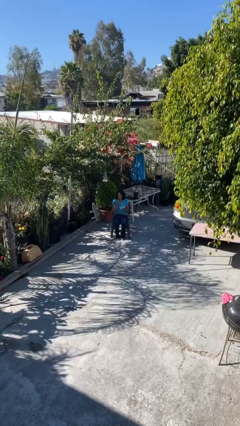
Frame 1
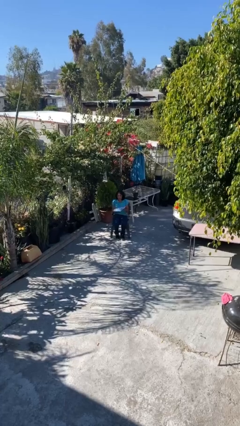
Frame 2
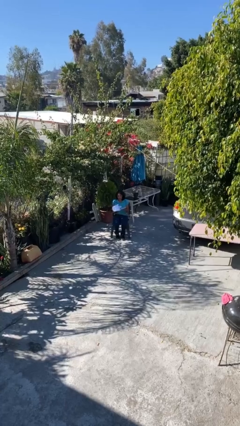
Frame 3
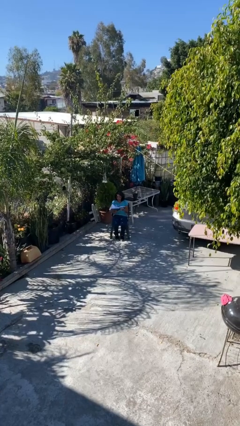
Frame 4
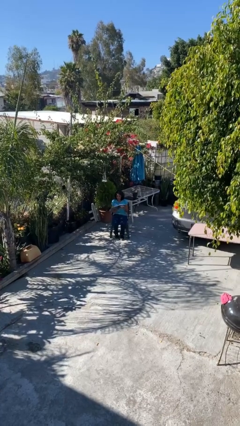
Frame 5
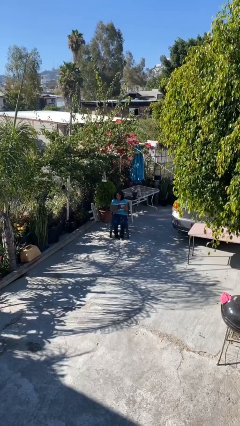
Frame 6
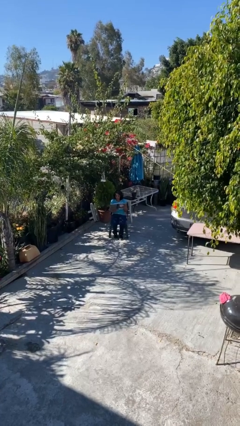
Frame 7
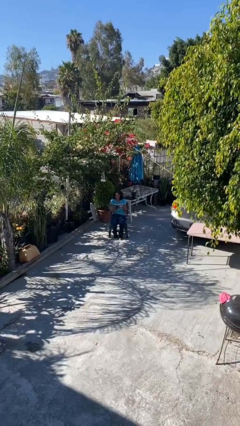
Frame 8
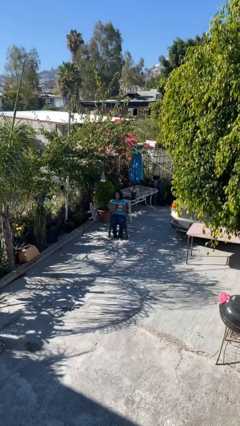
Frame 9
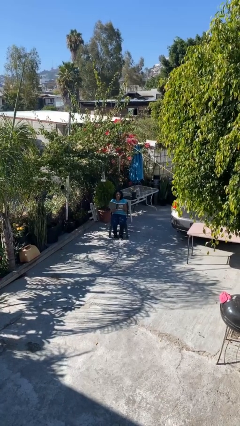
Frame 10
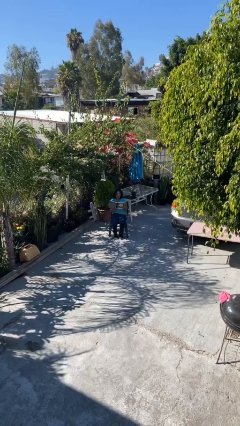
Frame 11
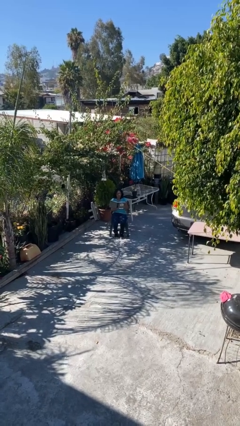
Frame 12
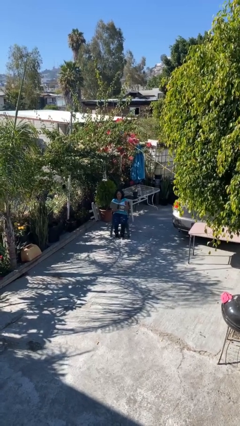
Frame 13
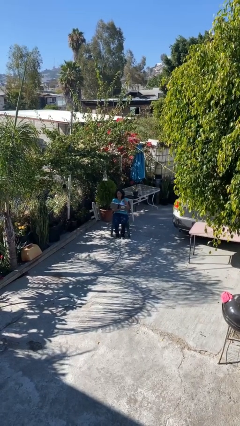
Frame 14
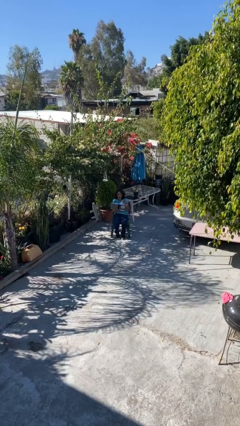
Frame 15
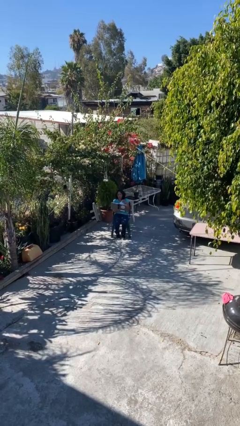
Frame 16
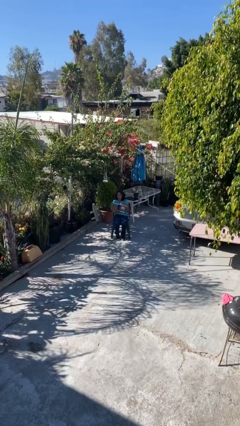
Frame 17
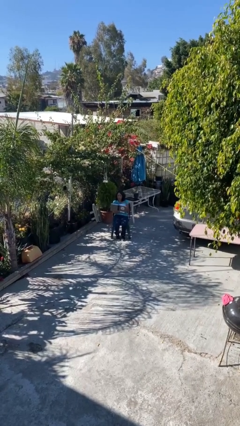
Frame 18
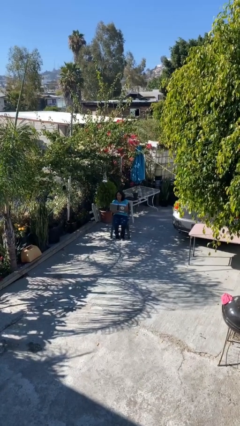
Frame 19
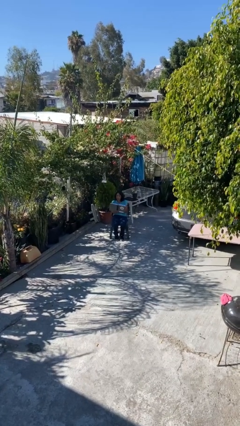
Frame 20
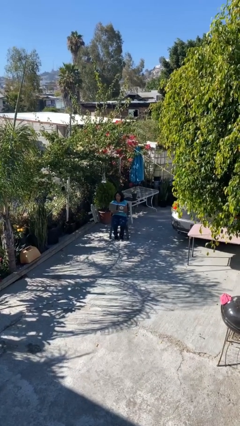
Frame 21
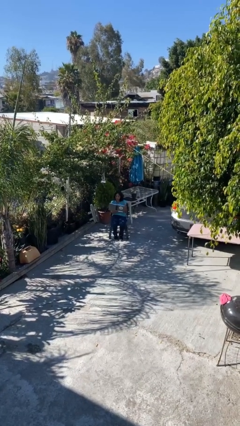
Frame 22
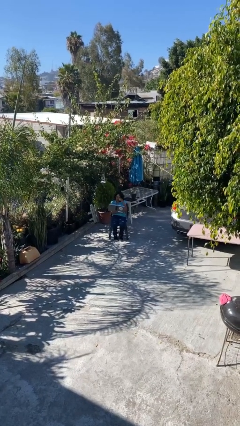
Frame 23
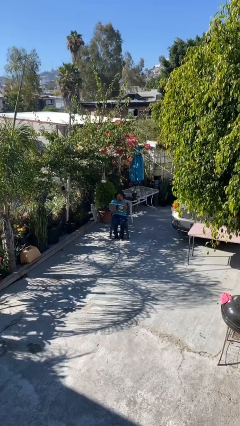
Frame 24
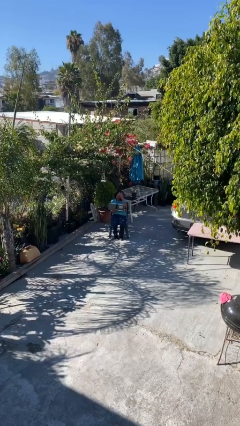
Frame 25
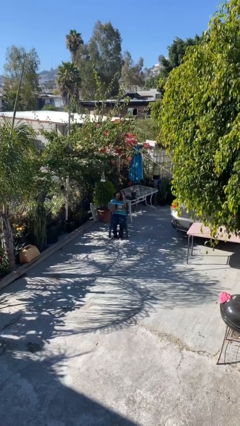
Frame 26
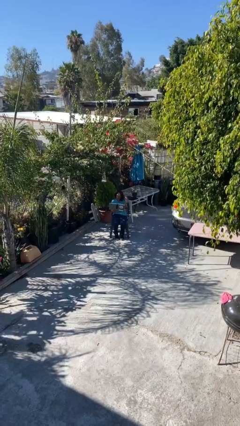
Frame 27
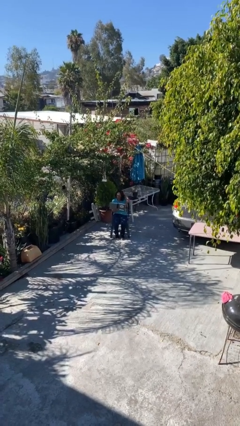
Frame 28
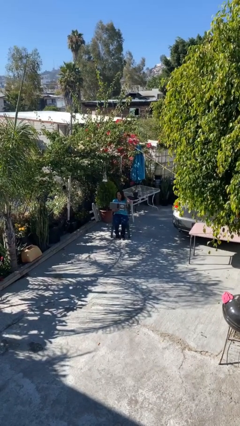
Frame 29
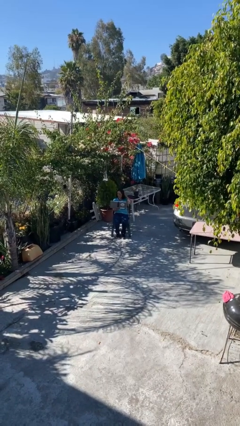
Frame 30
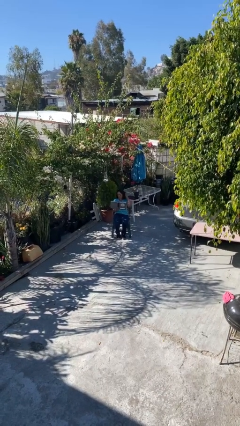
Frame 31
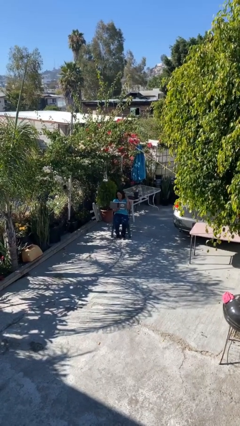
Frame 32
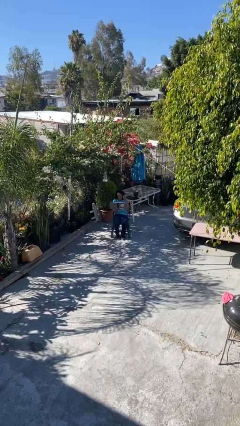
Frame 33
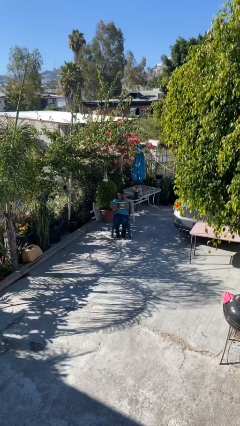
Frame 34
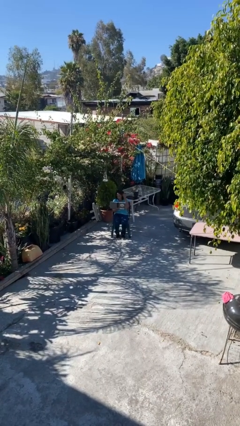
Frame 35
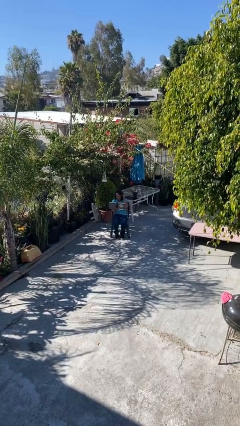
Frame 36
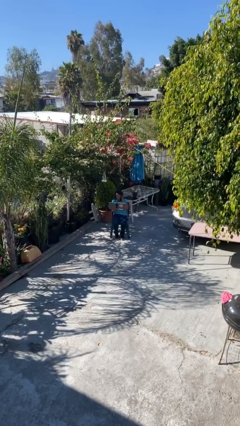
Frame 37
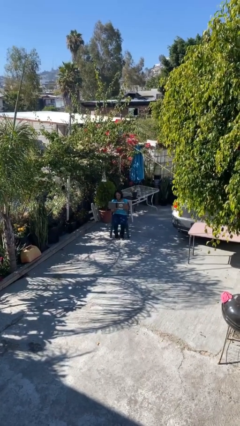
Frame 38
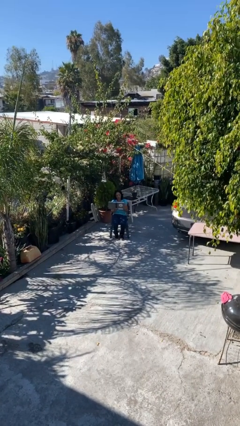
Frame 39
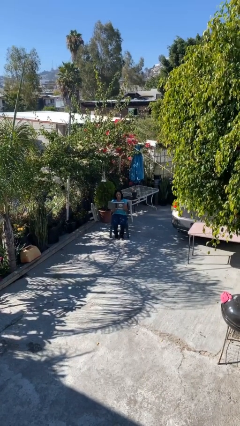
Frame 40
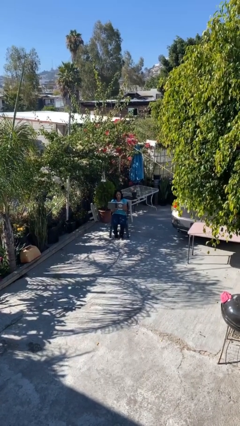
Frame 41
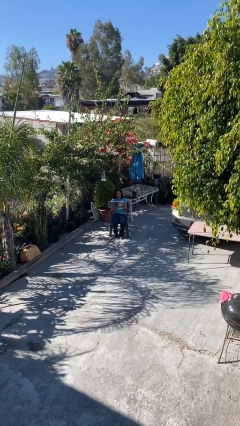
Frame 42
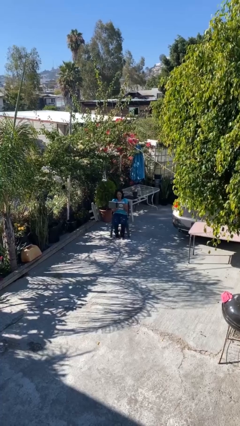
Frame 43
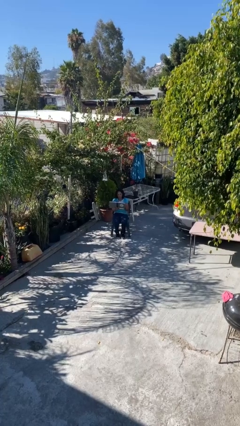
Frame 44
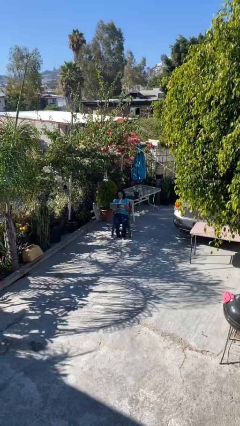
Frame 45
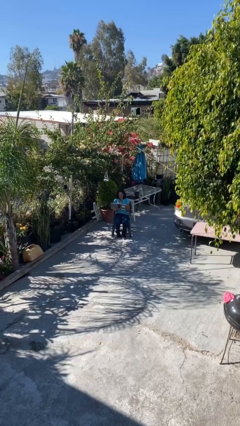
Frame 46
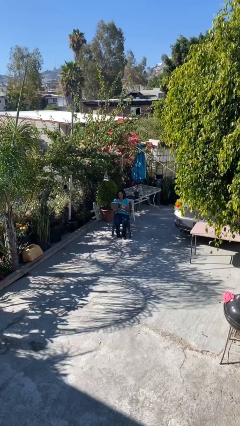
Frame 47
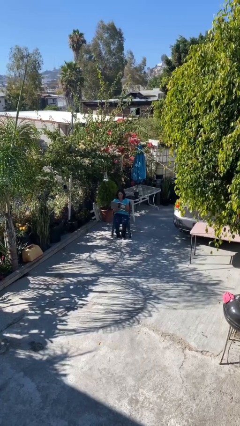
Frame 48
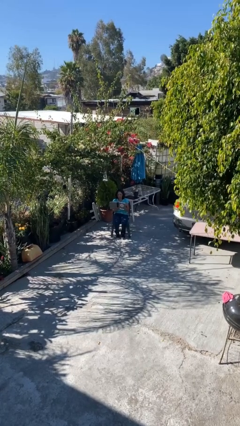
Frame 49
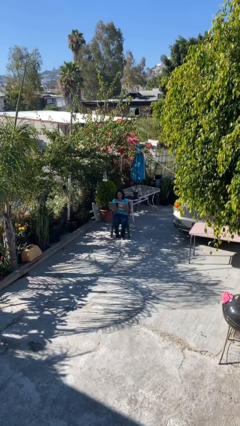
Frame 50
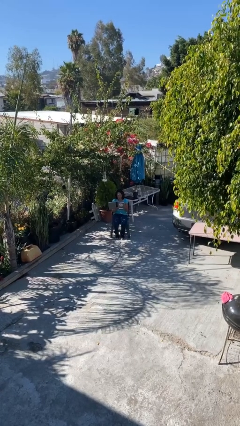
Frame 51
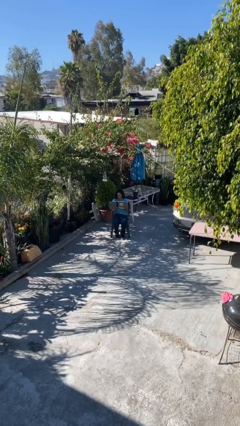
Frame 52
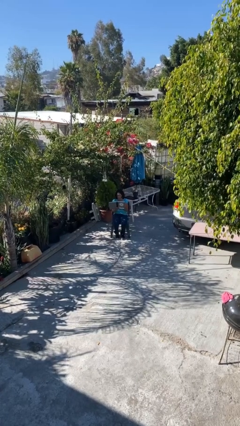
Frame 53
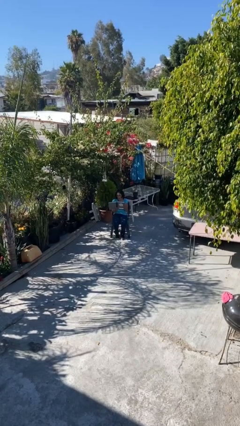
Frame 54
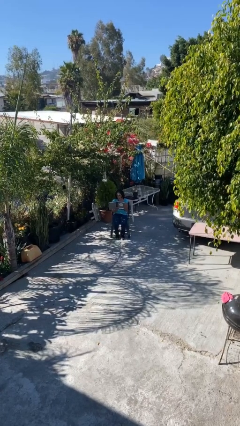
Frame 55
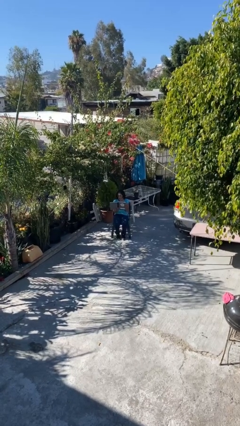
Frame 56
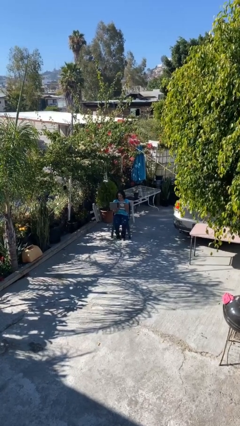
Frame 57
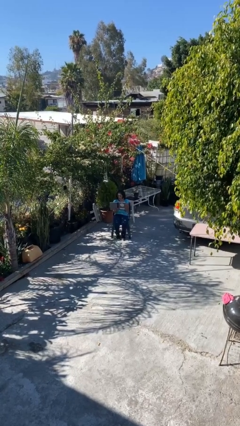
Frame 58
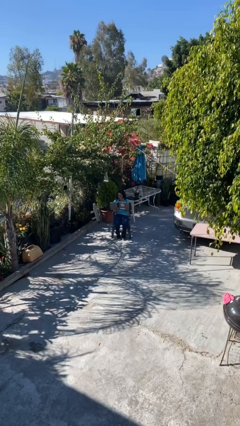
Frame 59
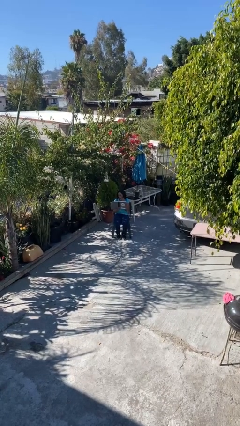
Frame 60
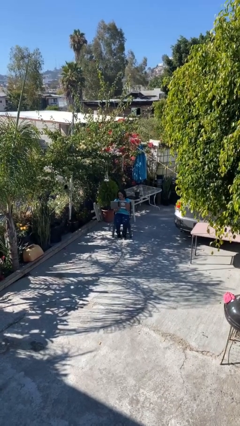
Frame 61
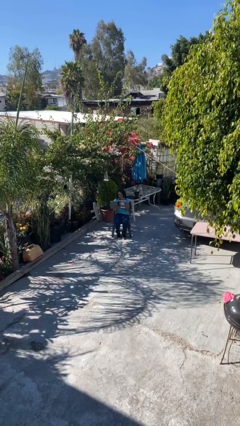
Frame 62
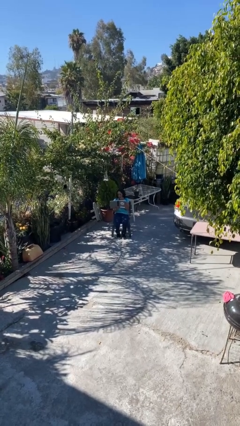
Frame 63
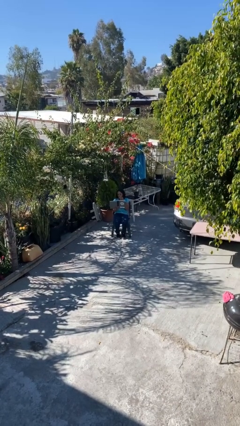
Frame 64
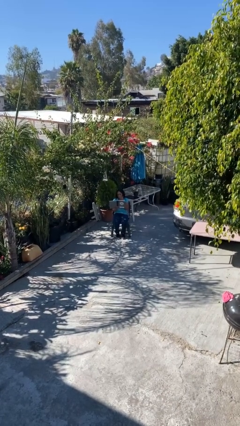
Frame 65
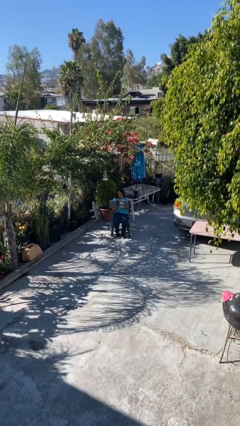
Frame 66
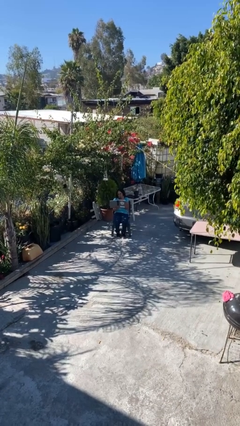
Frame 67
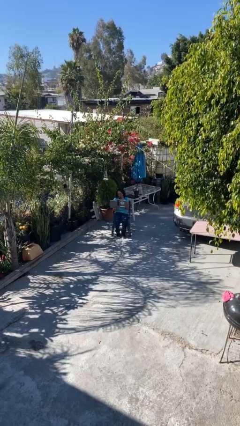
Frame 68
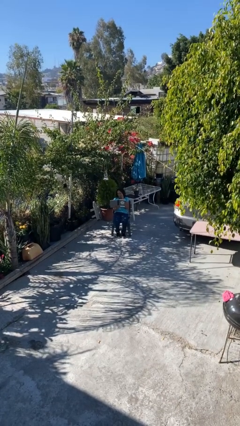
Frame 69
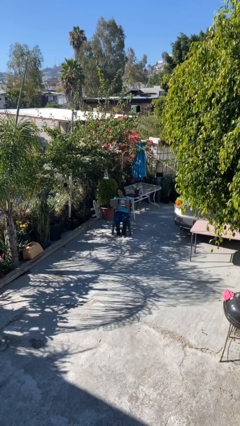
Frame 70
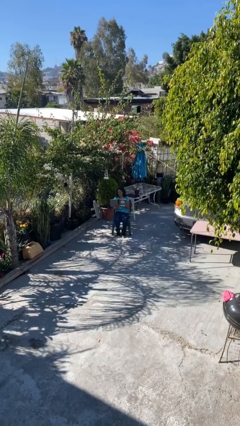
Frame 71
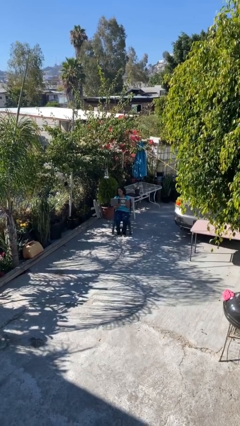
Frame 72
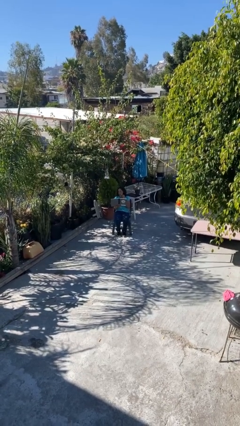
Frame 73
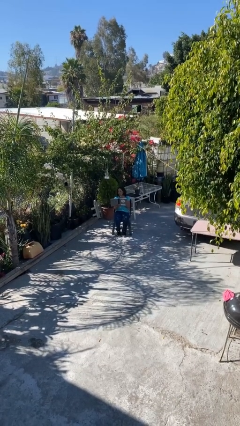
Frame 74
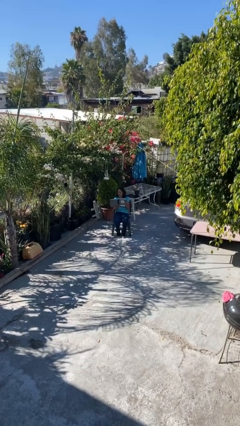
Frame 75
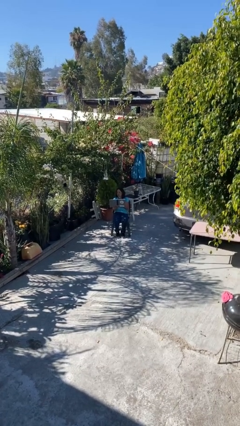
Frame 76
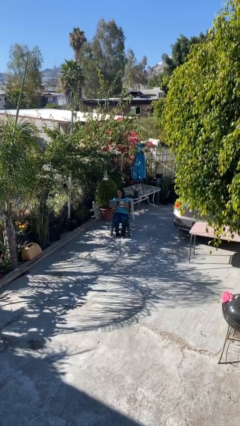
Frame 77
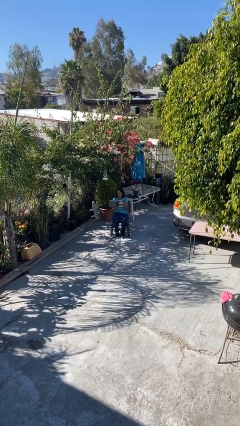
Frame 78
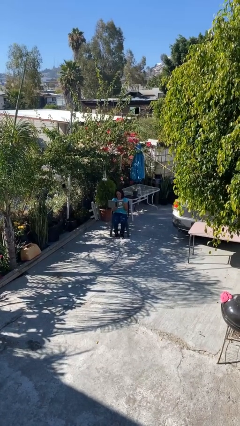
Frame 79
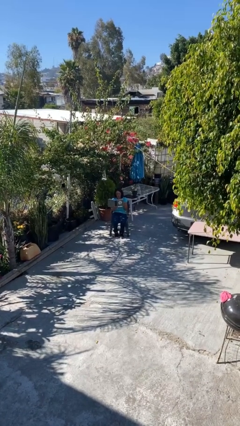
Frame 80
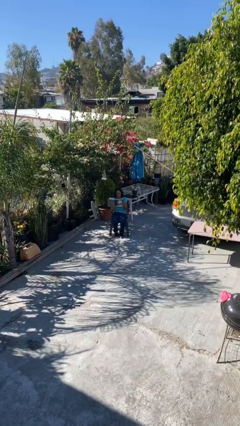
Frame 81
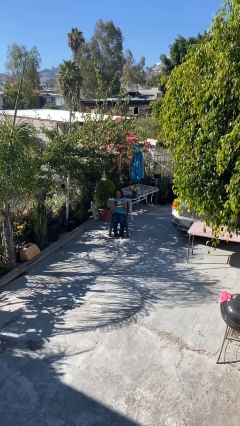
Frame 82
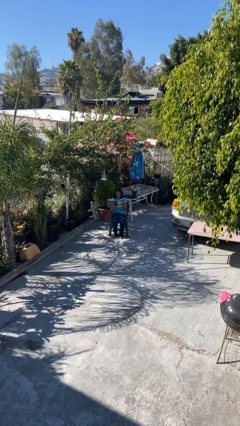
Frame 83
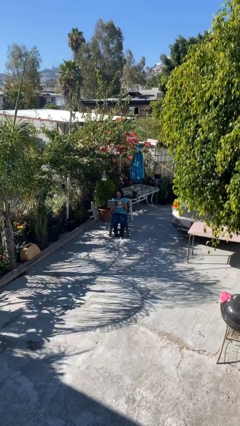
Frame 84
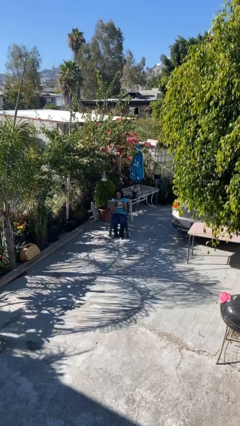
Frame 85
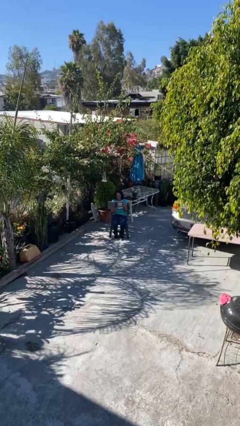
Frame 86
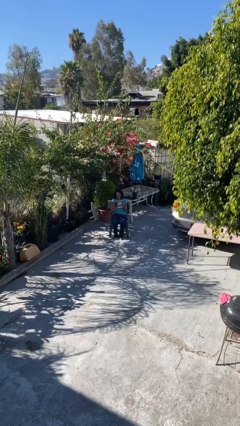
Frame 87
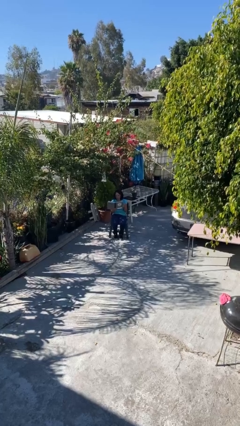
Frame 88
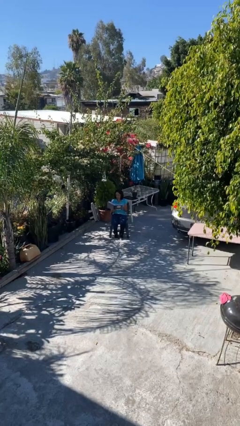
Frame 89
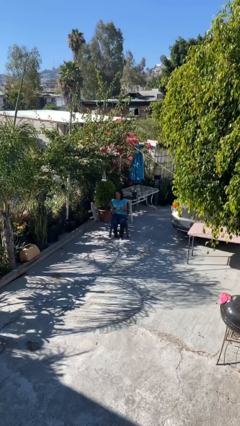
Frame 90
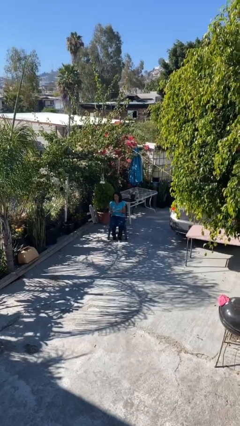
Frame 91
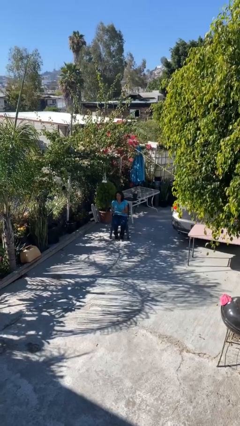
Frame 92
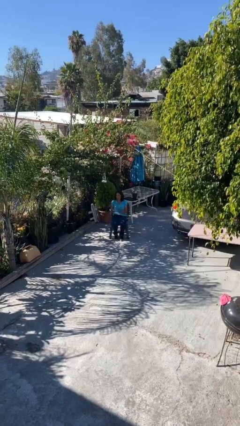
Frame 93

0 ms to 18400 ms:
person reads document
